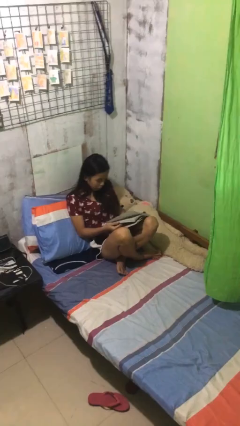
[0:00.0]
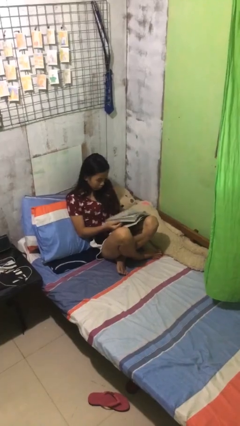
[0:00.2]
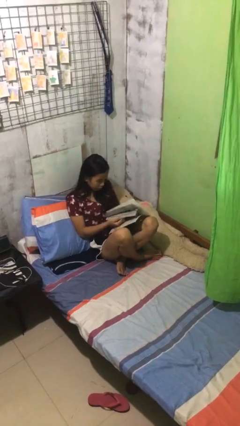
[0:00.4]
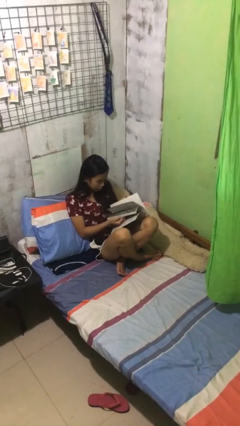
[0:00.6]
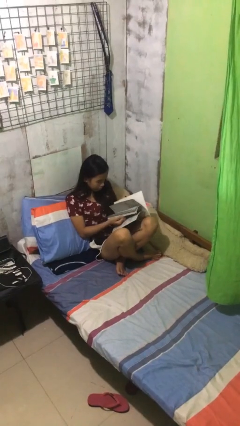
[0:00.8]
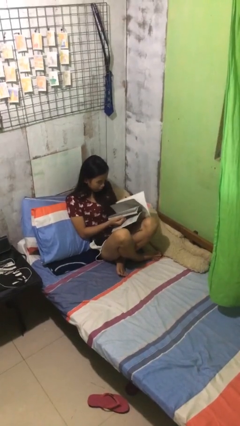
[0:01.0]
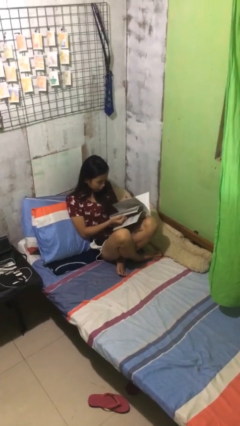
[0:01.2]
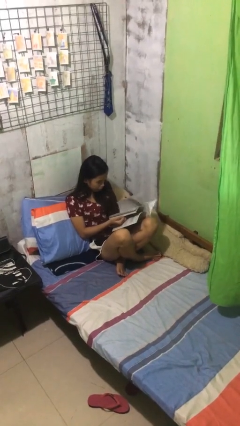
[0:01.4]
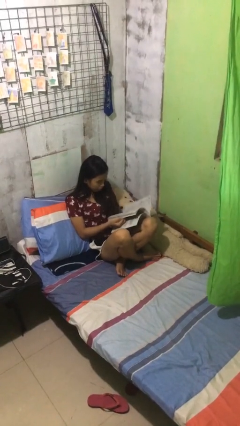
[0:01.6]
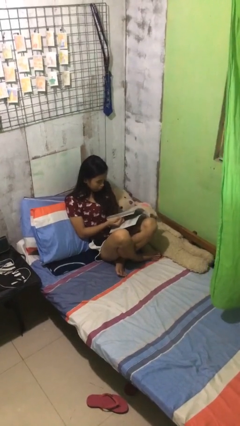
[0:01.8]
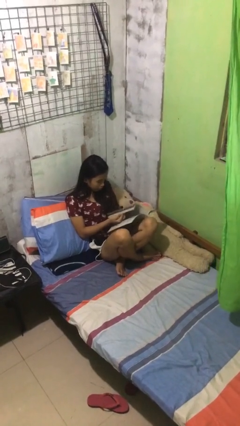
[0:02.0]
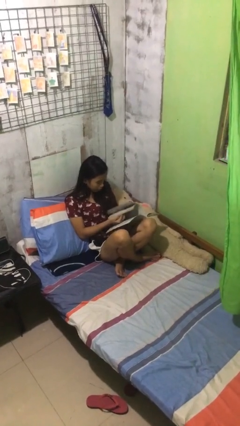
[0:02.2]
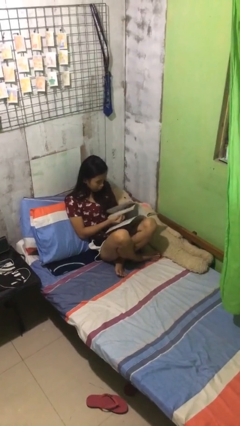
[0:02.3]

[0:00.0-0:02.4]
person reads document

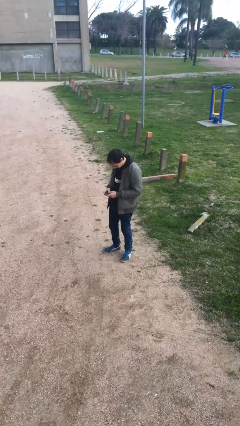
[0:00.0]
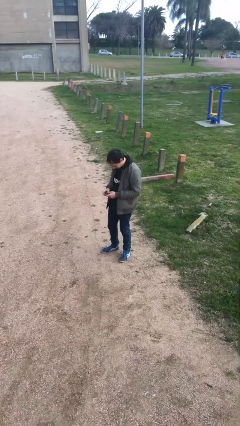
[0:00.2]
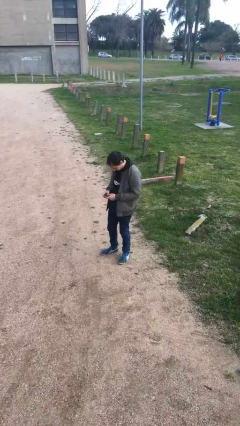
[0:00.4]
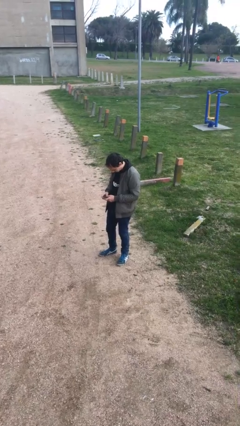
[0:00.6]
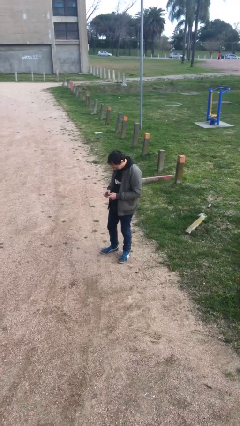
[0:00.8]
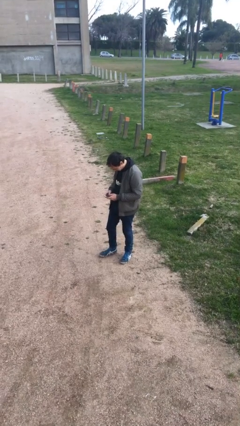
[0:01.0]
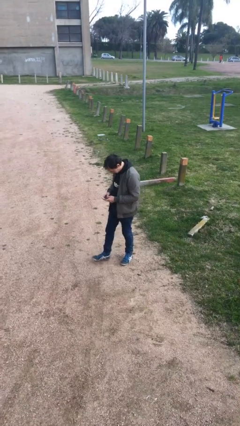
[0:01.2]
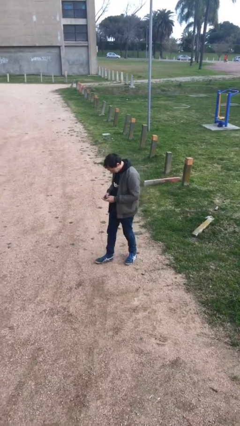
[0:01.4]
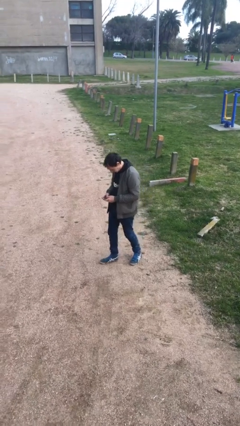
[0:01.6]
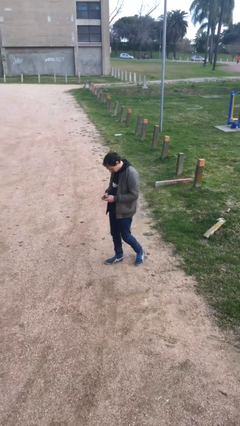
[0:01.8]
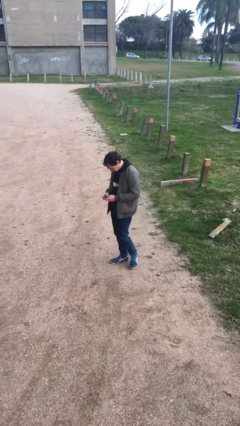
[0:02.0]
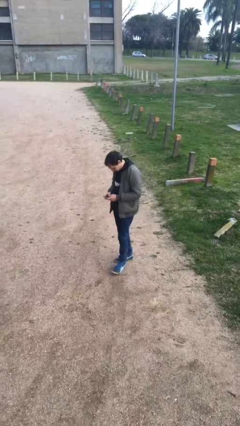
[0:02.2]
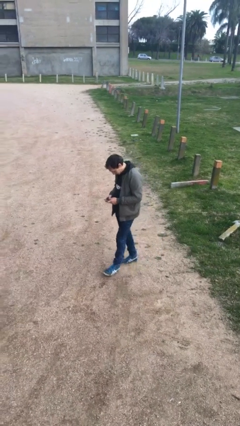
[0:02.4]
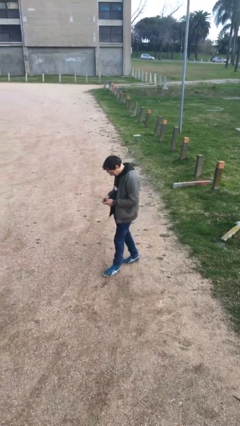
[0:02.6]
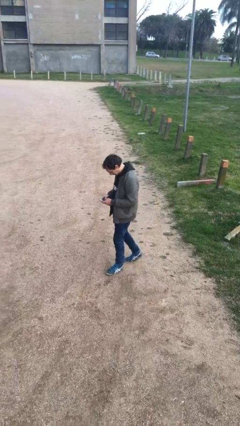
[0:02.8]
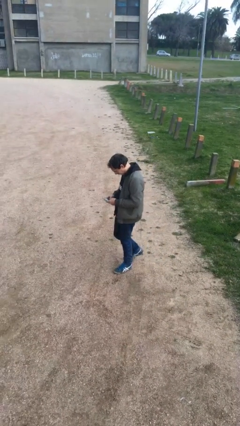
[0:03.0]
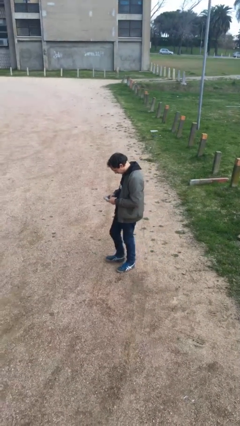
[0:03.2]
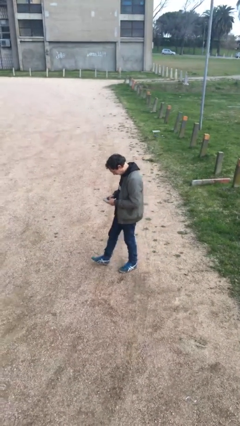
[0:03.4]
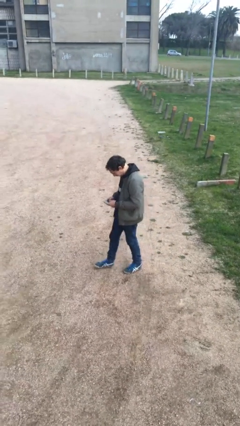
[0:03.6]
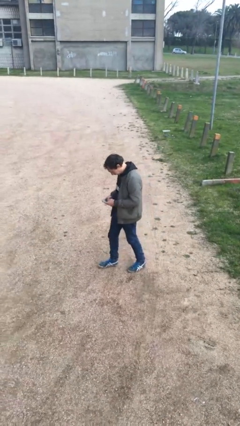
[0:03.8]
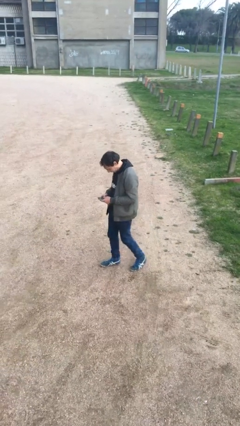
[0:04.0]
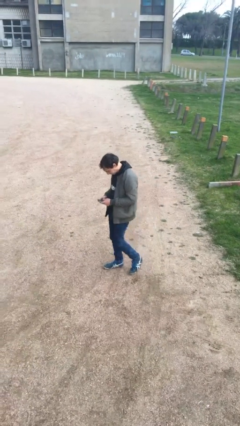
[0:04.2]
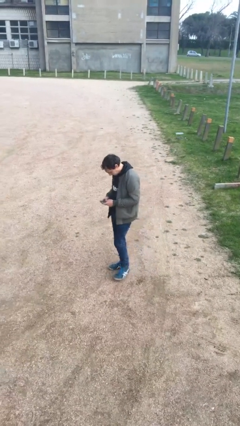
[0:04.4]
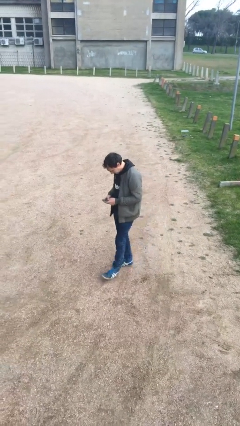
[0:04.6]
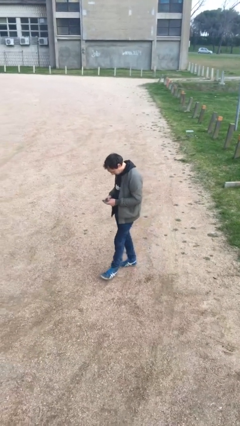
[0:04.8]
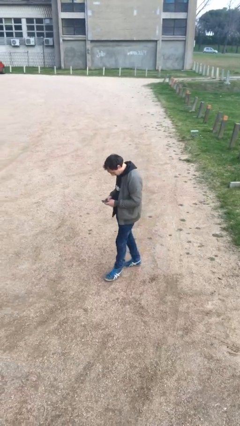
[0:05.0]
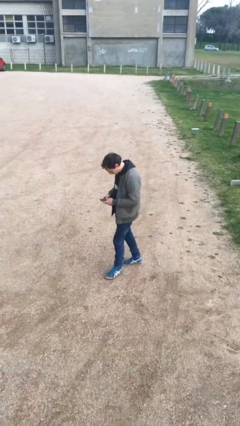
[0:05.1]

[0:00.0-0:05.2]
person texts on phone

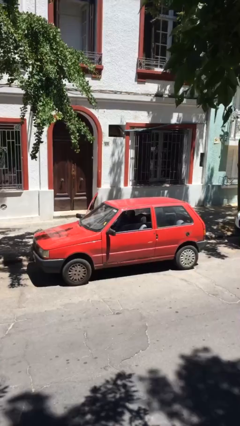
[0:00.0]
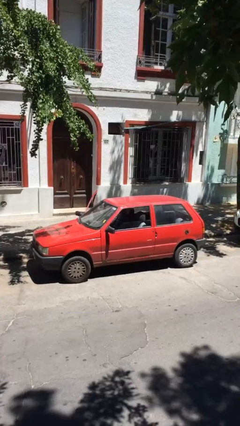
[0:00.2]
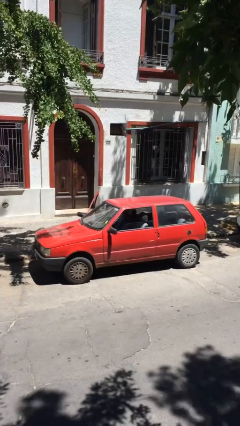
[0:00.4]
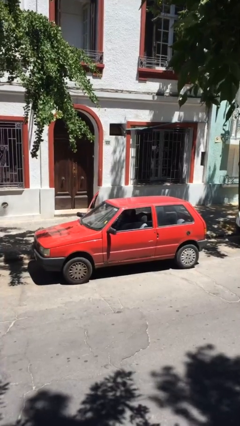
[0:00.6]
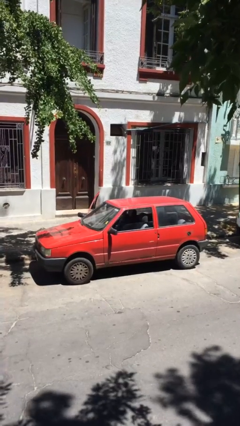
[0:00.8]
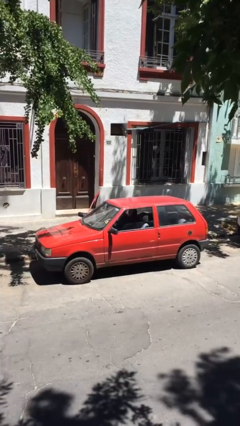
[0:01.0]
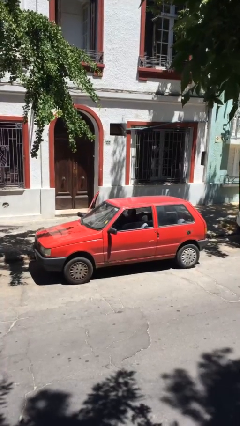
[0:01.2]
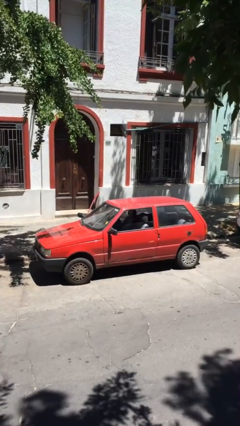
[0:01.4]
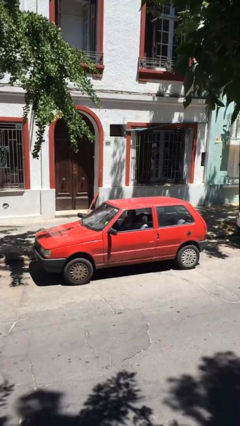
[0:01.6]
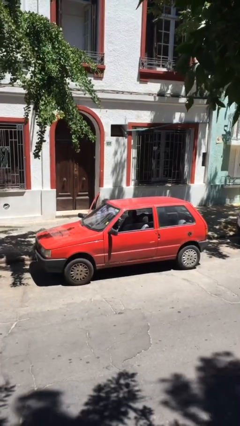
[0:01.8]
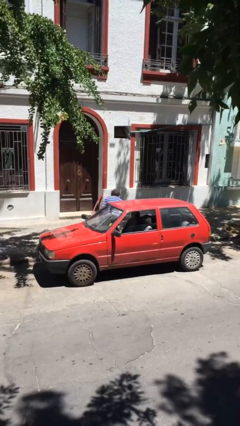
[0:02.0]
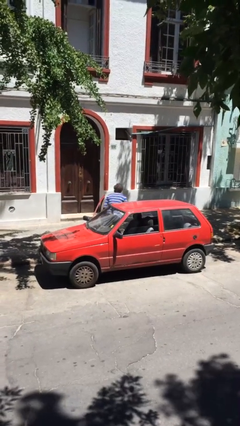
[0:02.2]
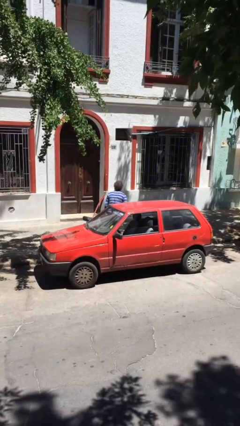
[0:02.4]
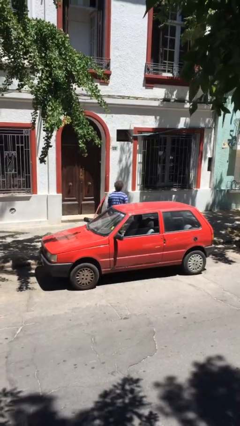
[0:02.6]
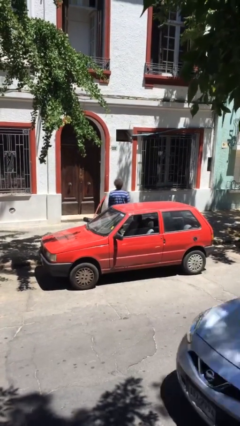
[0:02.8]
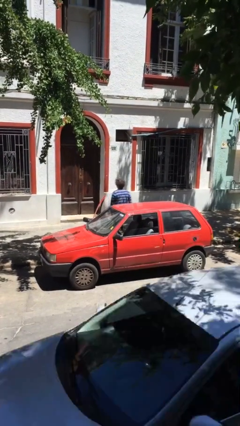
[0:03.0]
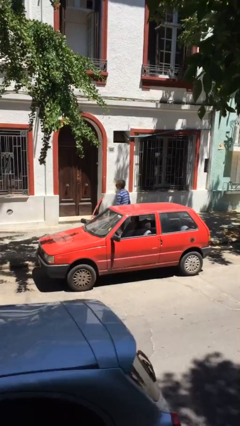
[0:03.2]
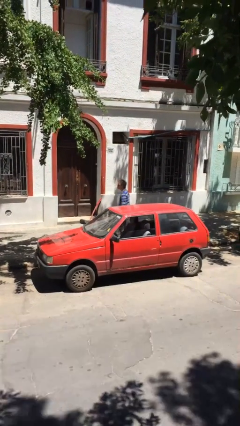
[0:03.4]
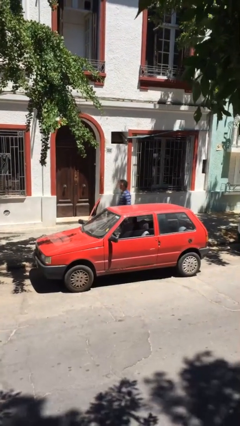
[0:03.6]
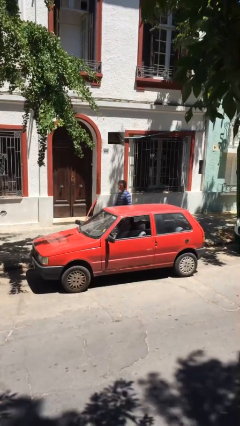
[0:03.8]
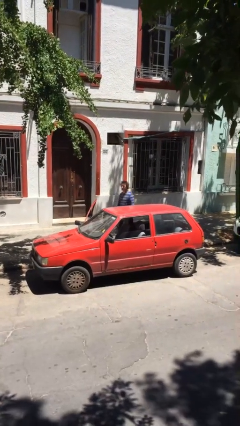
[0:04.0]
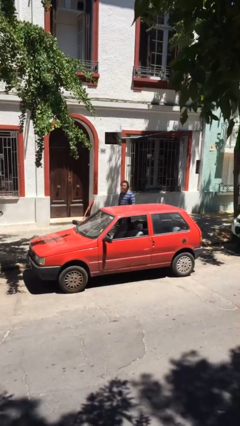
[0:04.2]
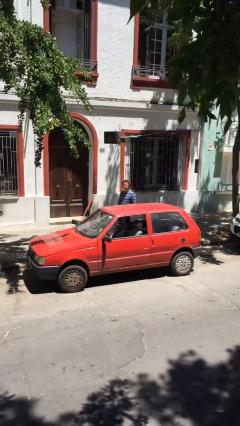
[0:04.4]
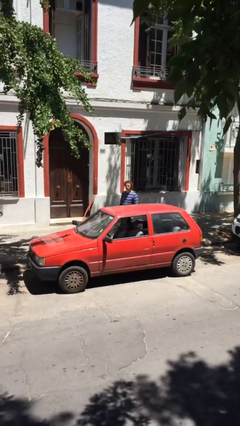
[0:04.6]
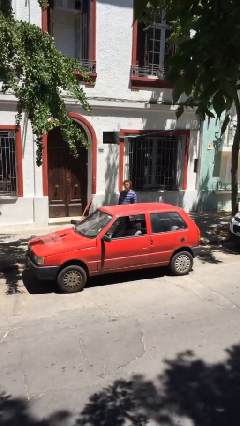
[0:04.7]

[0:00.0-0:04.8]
person exits car

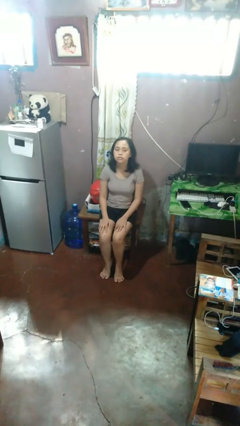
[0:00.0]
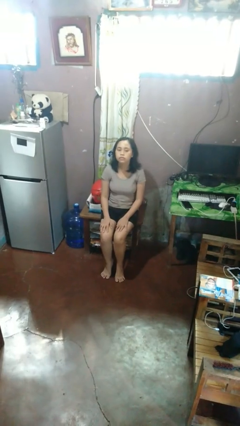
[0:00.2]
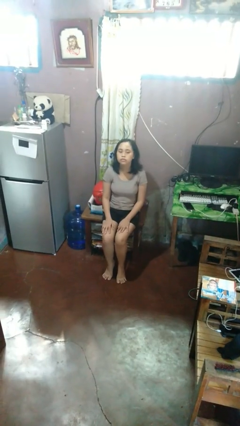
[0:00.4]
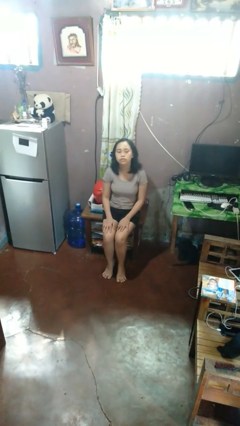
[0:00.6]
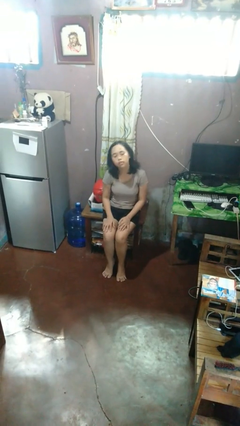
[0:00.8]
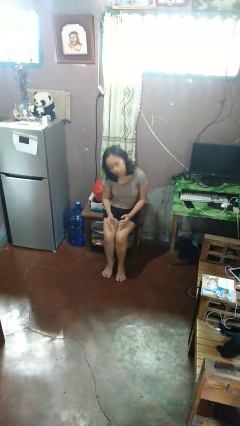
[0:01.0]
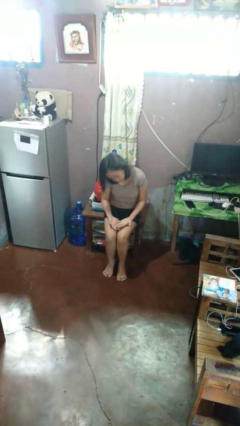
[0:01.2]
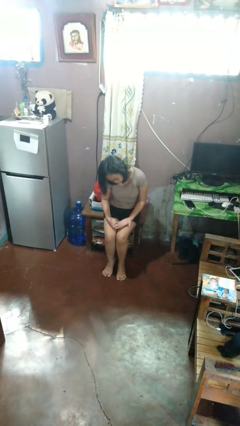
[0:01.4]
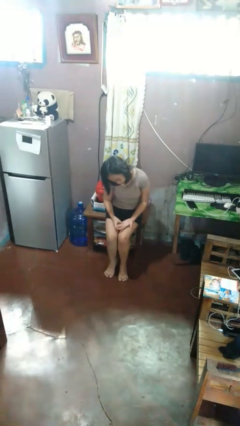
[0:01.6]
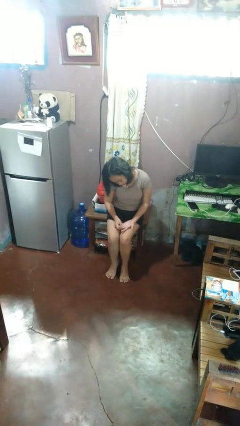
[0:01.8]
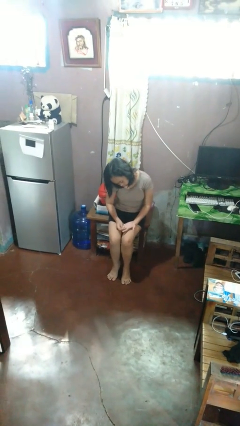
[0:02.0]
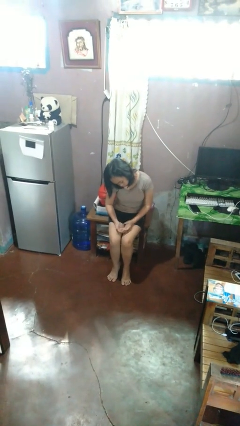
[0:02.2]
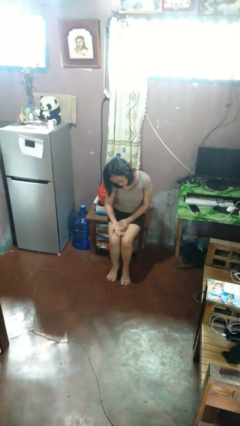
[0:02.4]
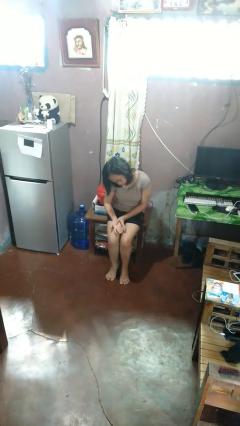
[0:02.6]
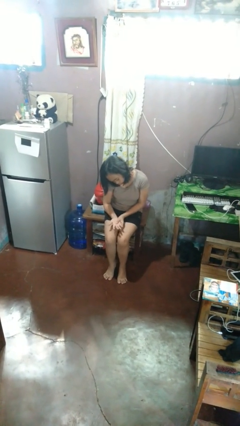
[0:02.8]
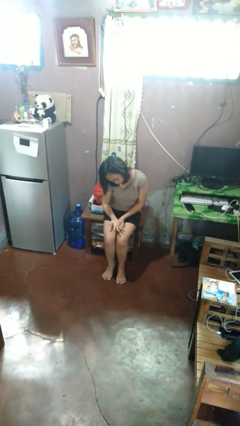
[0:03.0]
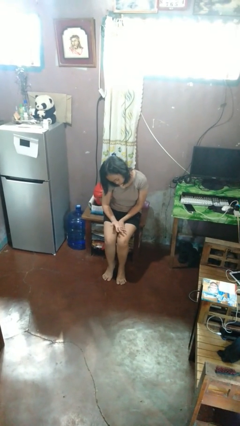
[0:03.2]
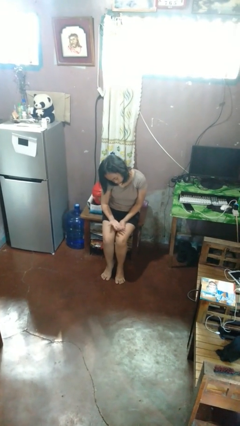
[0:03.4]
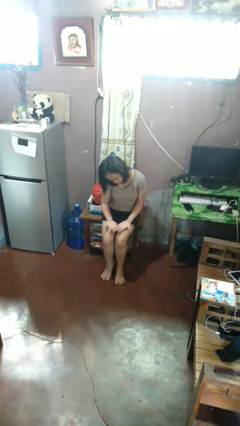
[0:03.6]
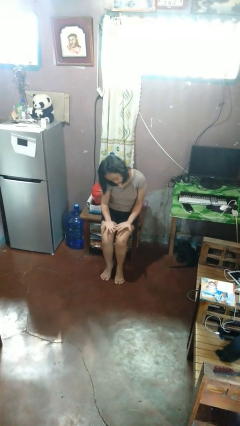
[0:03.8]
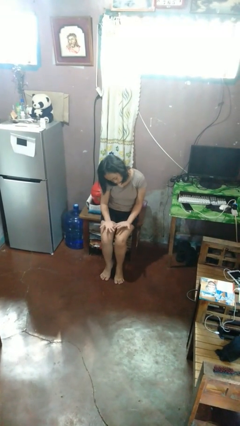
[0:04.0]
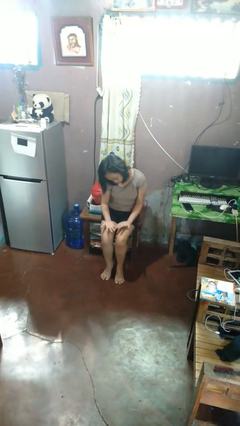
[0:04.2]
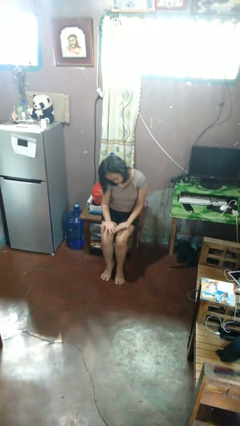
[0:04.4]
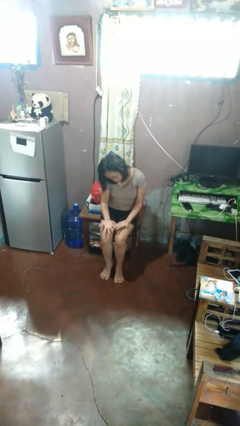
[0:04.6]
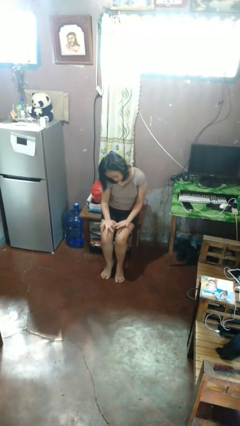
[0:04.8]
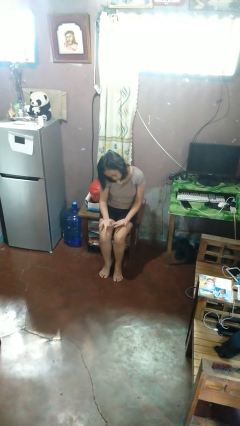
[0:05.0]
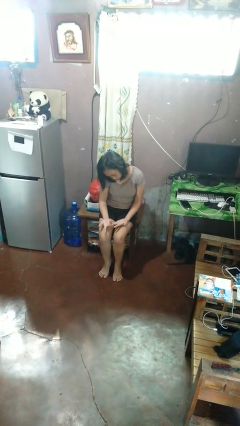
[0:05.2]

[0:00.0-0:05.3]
person looks at hands in lap
